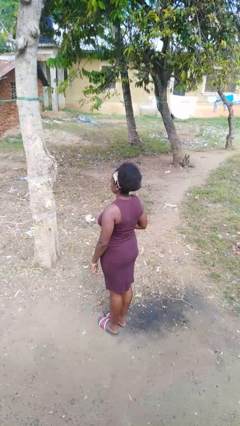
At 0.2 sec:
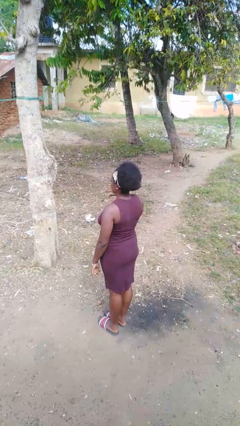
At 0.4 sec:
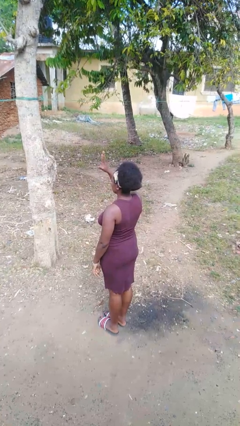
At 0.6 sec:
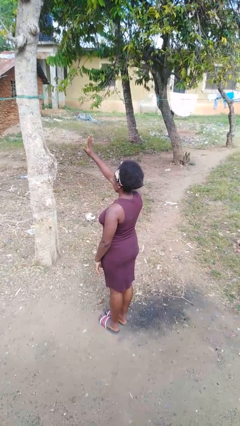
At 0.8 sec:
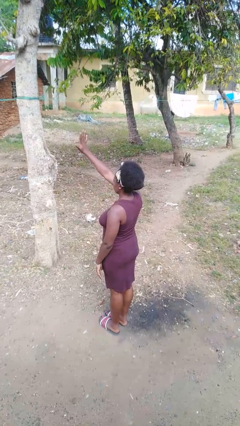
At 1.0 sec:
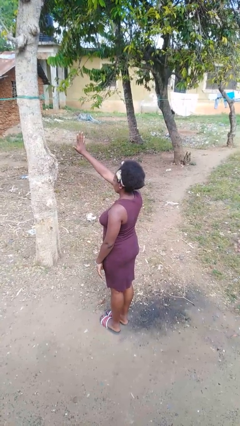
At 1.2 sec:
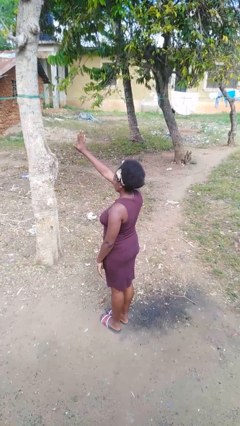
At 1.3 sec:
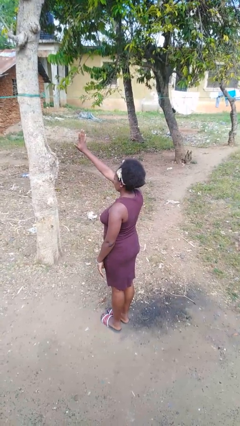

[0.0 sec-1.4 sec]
person gestures number five

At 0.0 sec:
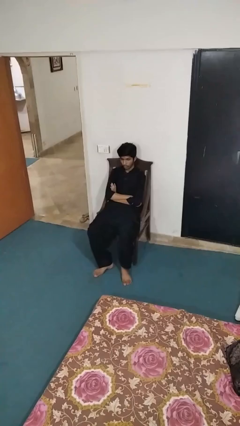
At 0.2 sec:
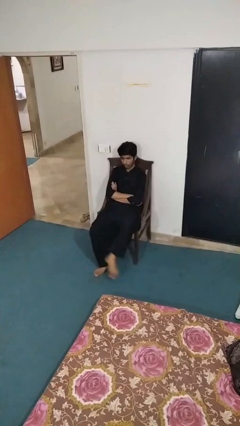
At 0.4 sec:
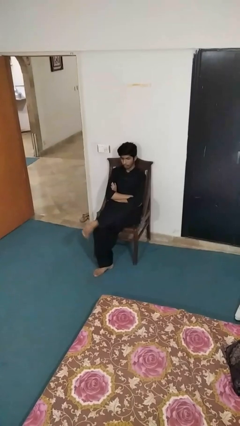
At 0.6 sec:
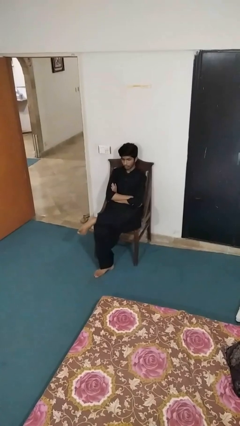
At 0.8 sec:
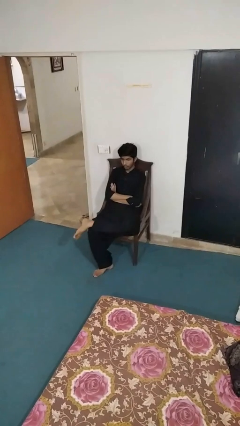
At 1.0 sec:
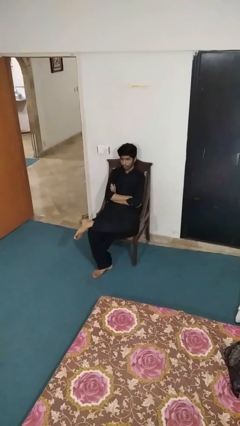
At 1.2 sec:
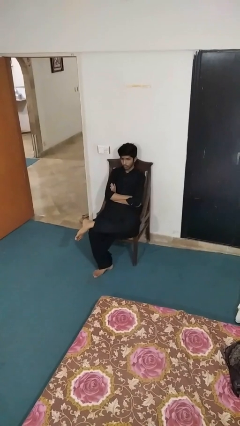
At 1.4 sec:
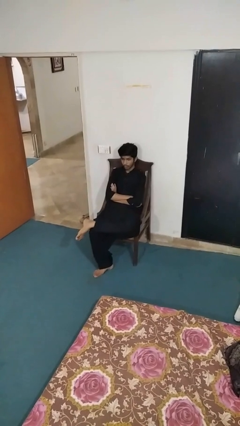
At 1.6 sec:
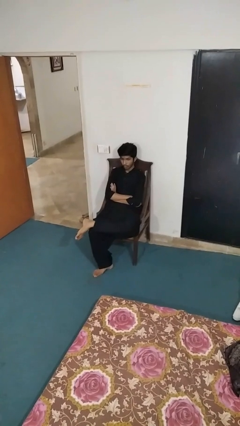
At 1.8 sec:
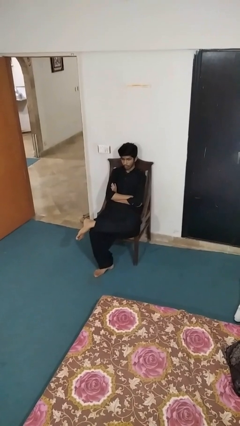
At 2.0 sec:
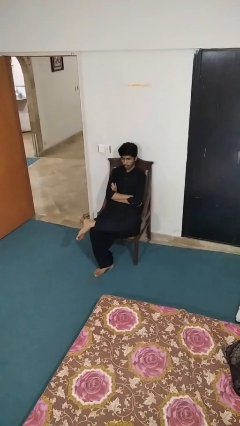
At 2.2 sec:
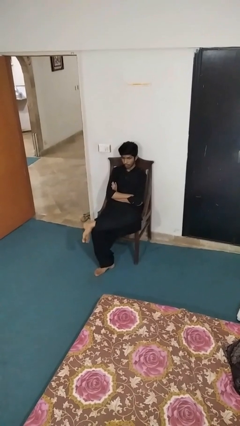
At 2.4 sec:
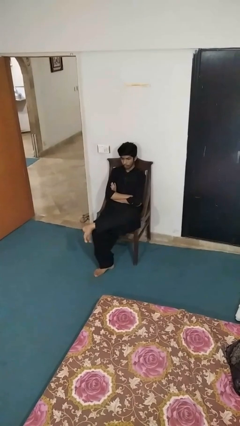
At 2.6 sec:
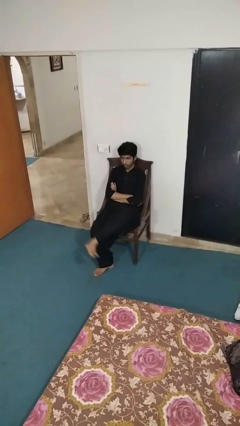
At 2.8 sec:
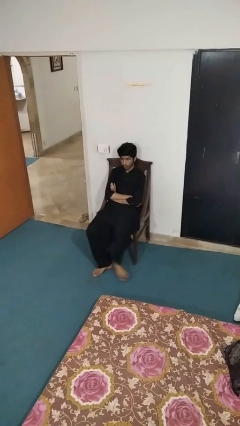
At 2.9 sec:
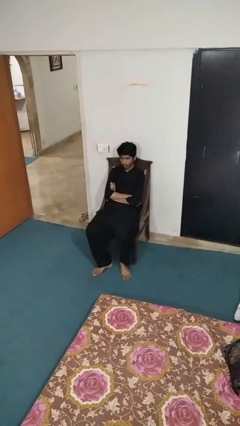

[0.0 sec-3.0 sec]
person crosses legs

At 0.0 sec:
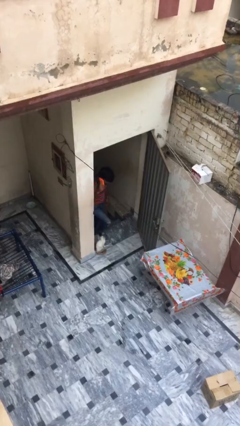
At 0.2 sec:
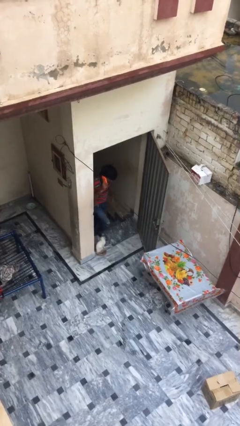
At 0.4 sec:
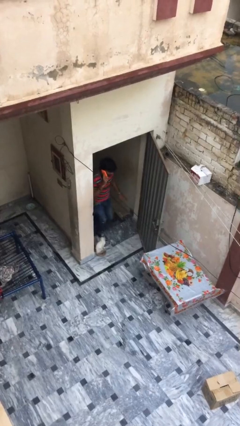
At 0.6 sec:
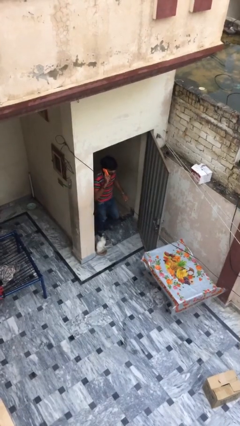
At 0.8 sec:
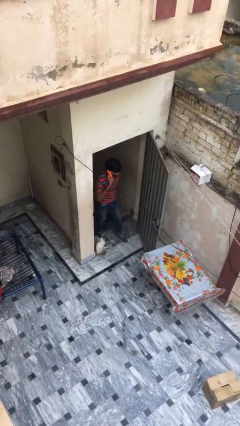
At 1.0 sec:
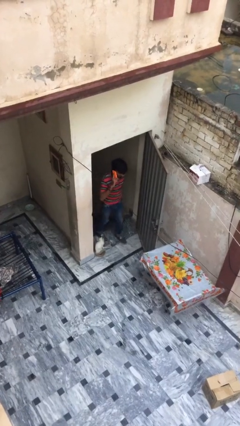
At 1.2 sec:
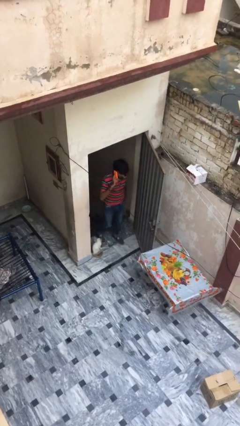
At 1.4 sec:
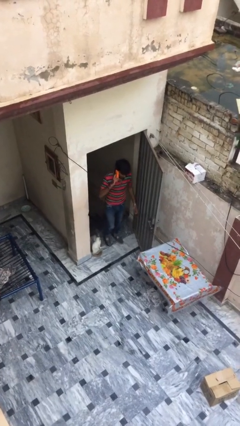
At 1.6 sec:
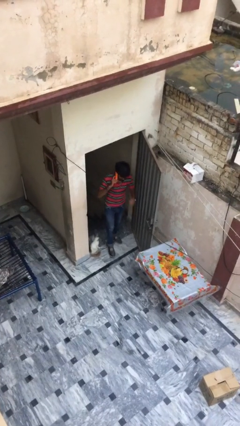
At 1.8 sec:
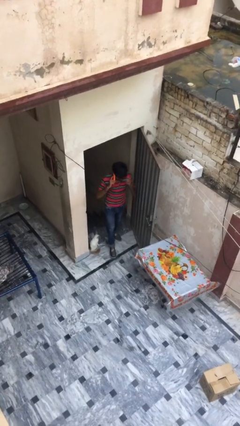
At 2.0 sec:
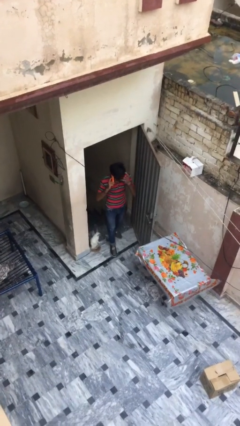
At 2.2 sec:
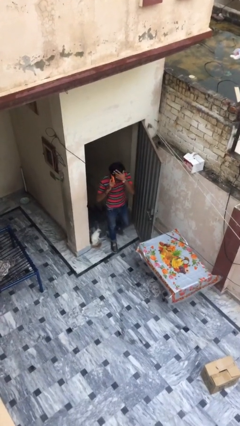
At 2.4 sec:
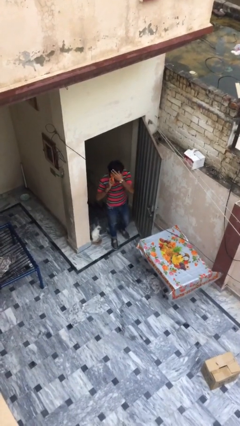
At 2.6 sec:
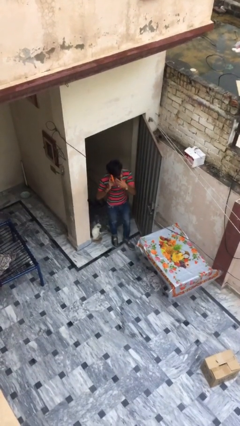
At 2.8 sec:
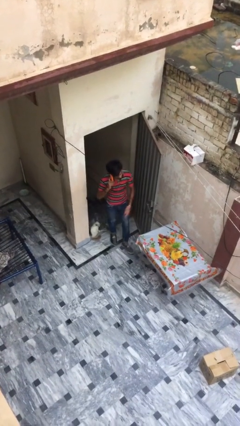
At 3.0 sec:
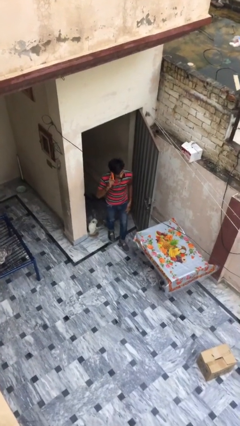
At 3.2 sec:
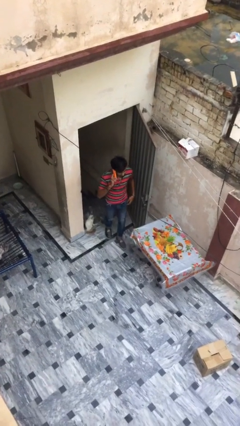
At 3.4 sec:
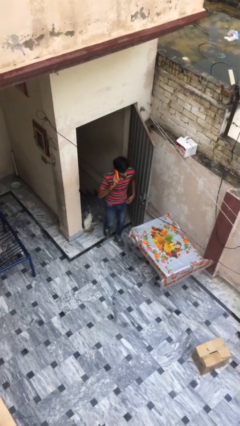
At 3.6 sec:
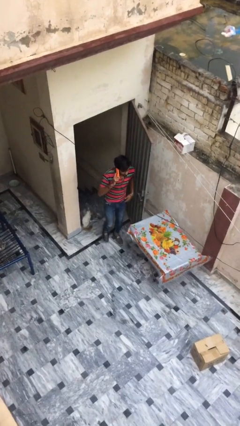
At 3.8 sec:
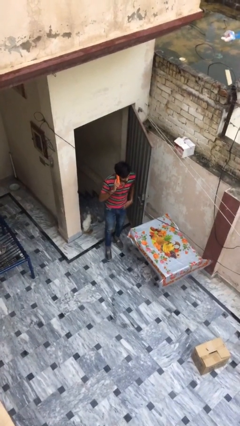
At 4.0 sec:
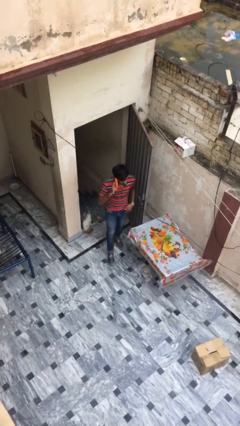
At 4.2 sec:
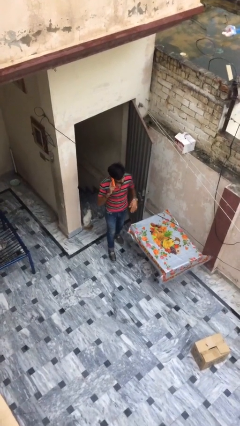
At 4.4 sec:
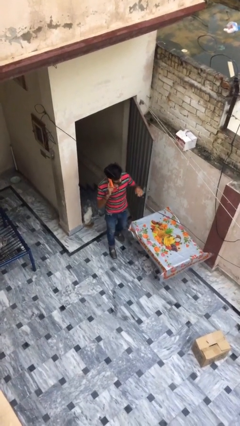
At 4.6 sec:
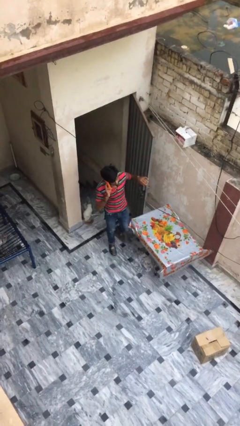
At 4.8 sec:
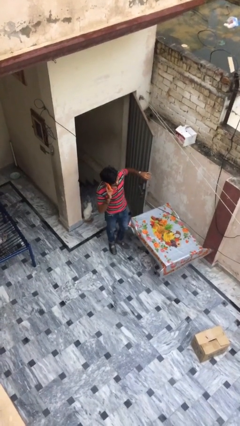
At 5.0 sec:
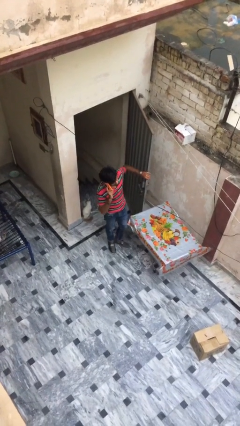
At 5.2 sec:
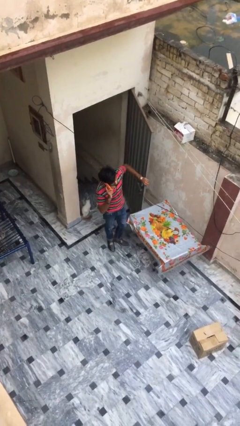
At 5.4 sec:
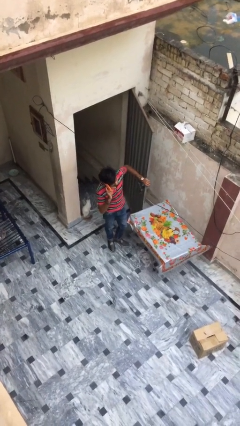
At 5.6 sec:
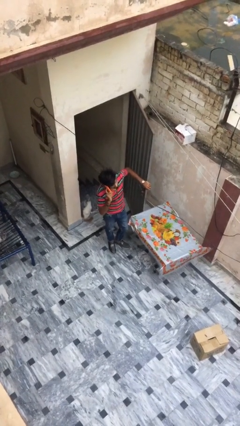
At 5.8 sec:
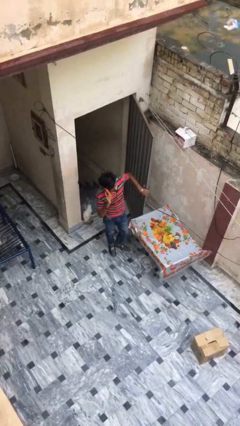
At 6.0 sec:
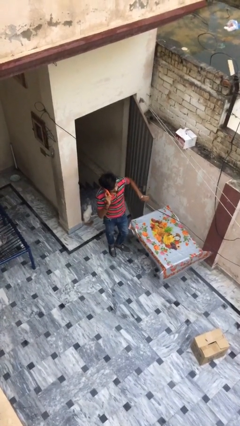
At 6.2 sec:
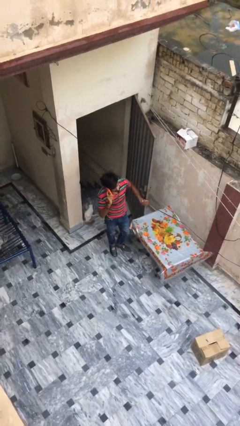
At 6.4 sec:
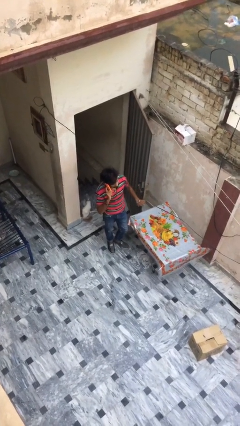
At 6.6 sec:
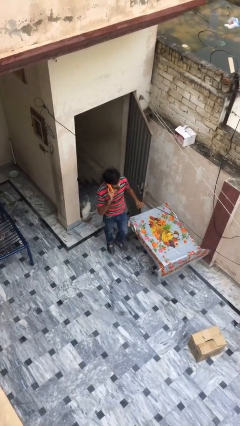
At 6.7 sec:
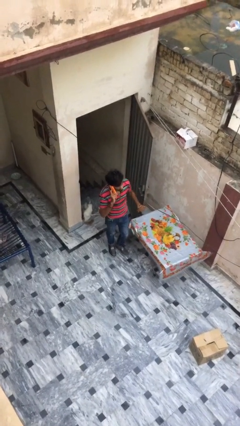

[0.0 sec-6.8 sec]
person enters scene through structure

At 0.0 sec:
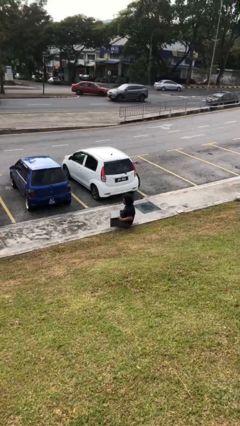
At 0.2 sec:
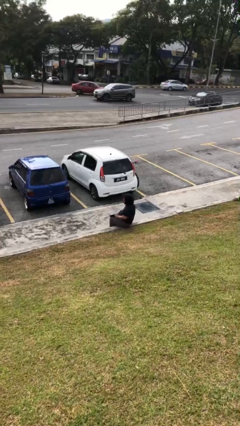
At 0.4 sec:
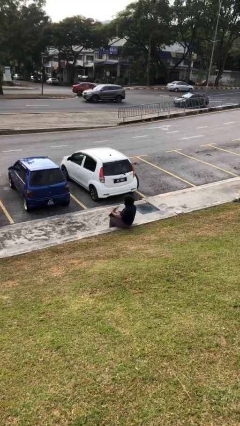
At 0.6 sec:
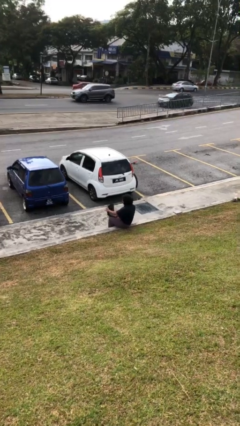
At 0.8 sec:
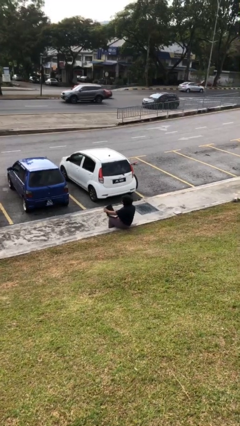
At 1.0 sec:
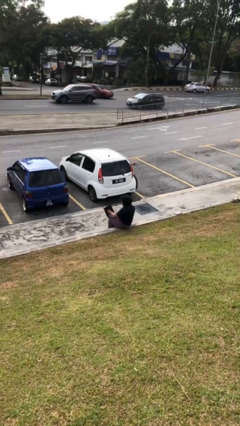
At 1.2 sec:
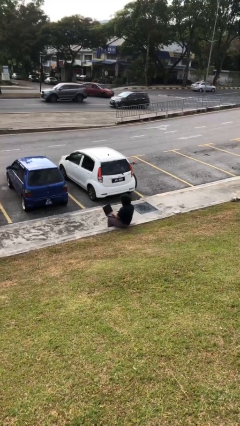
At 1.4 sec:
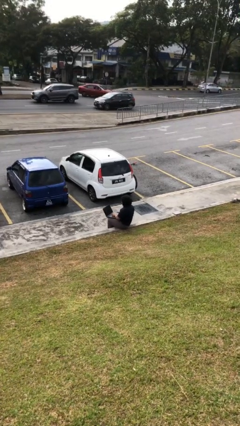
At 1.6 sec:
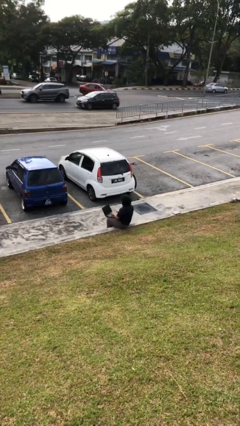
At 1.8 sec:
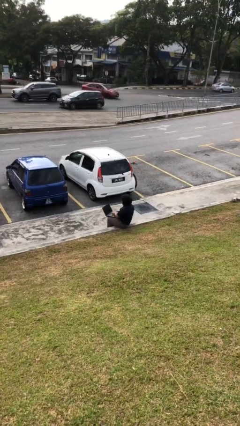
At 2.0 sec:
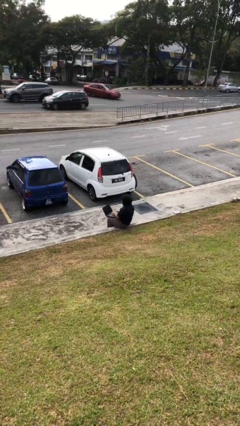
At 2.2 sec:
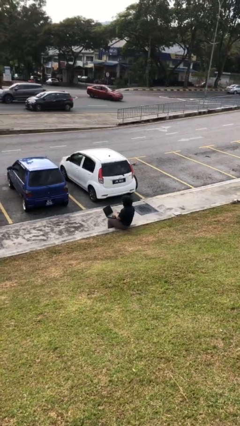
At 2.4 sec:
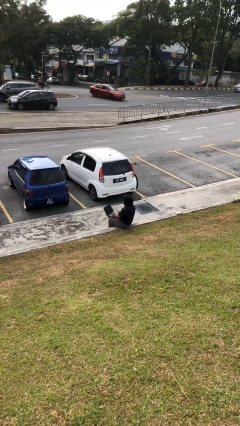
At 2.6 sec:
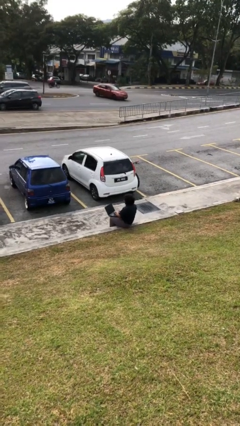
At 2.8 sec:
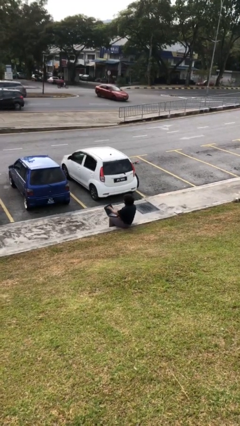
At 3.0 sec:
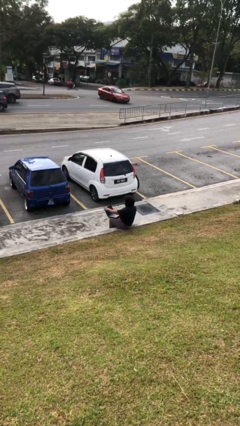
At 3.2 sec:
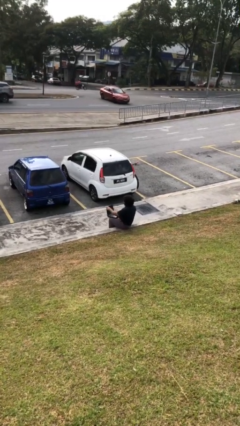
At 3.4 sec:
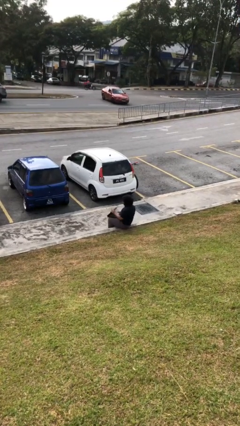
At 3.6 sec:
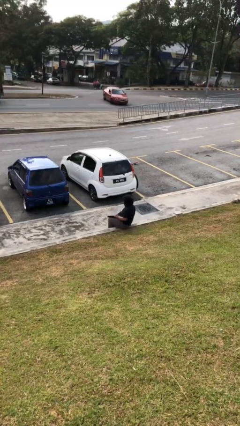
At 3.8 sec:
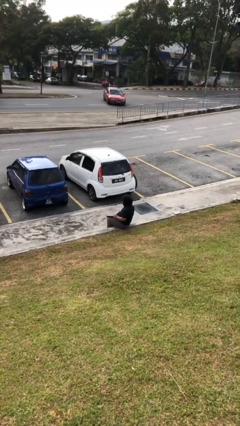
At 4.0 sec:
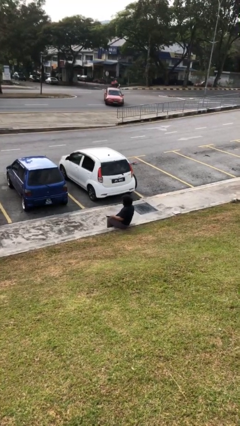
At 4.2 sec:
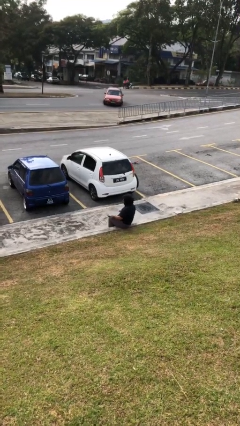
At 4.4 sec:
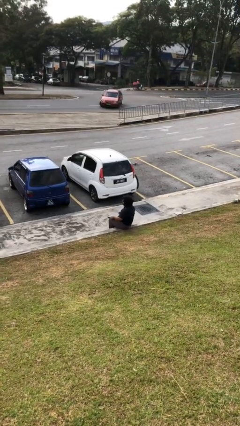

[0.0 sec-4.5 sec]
person interacts with laptop

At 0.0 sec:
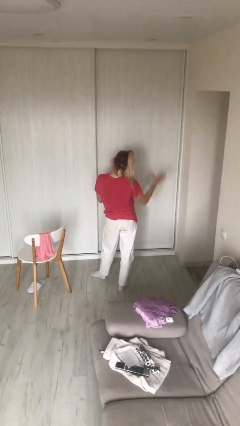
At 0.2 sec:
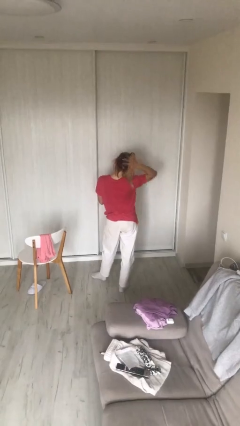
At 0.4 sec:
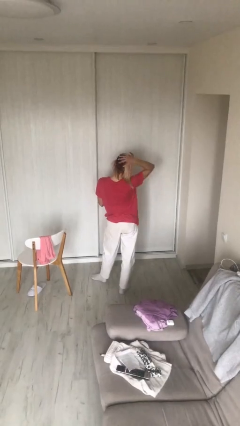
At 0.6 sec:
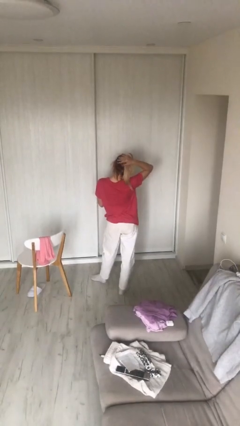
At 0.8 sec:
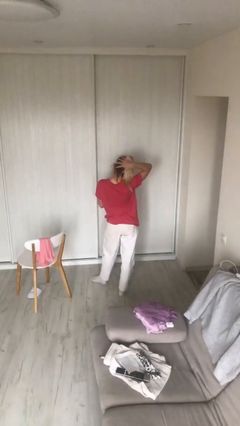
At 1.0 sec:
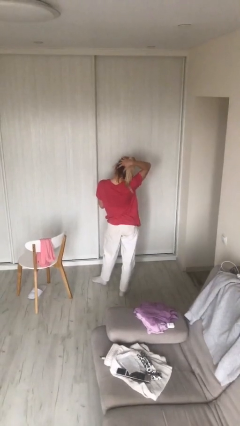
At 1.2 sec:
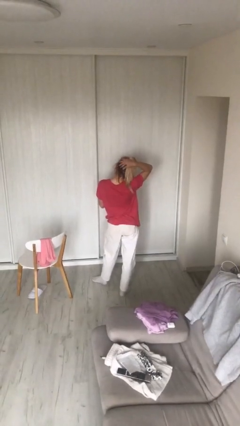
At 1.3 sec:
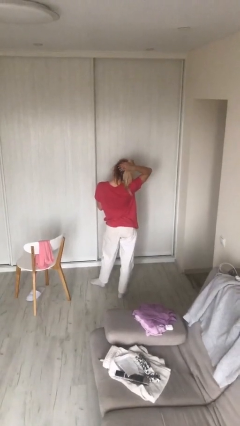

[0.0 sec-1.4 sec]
person pats head

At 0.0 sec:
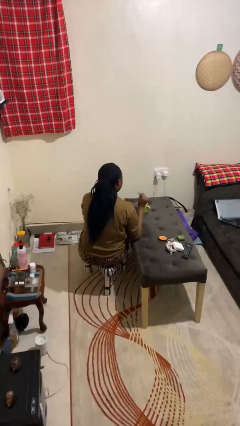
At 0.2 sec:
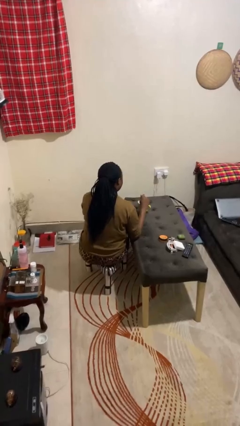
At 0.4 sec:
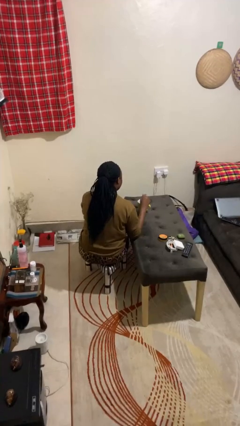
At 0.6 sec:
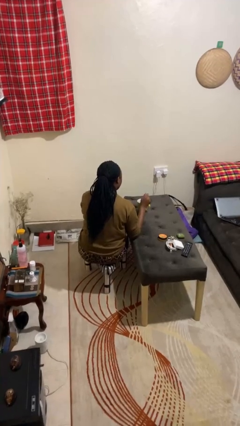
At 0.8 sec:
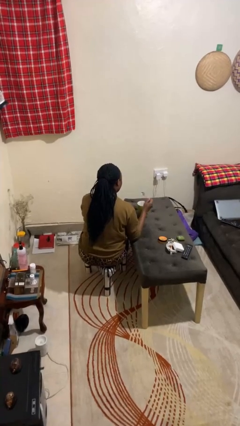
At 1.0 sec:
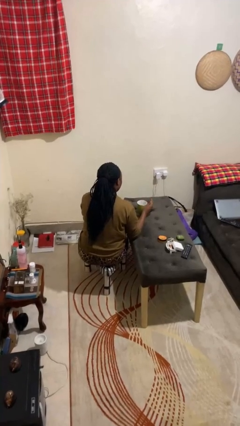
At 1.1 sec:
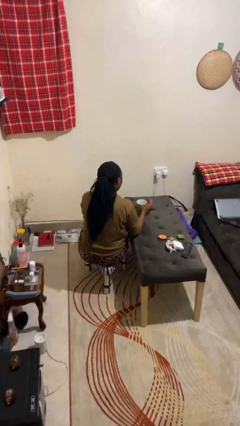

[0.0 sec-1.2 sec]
person stirs mug